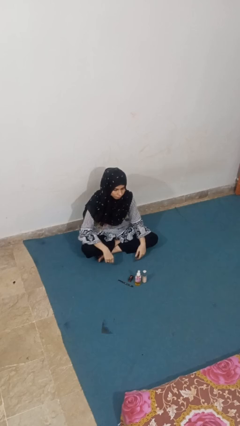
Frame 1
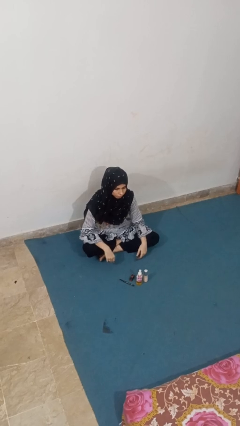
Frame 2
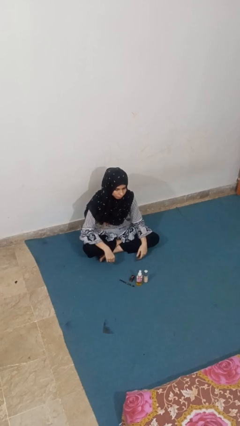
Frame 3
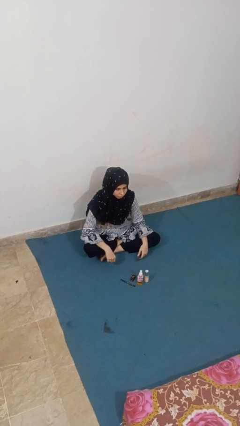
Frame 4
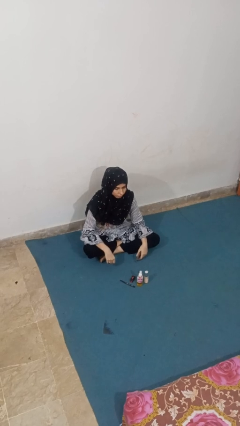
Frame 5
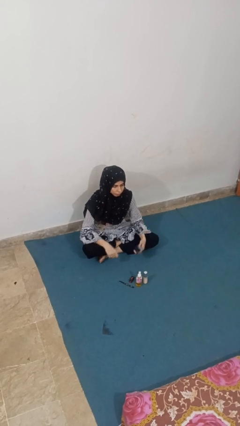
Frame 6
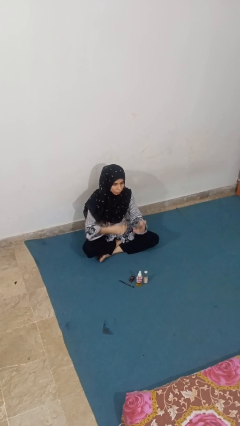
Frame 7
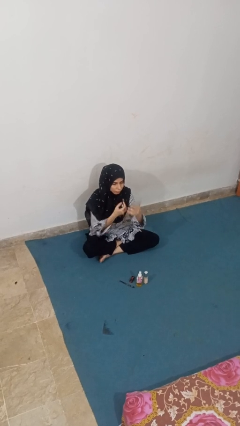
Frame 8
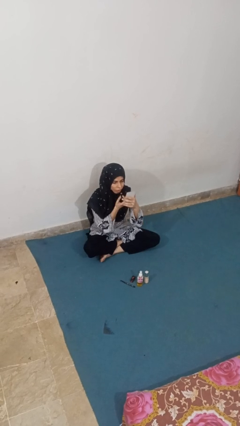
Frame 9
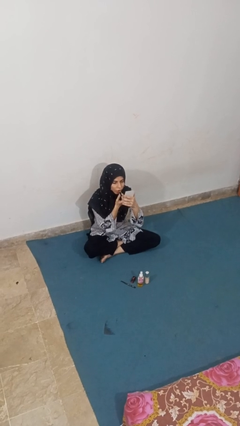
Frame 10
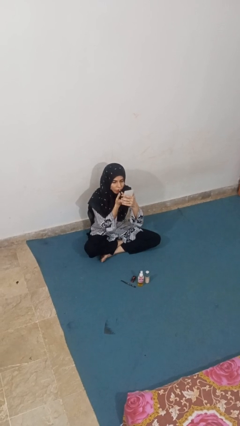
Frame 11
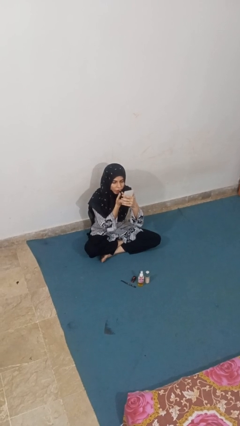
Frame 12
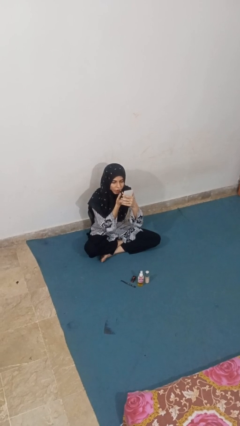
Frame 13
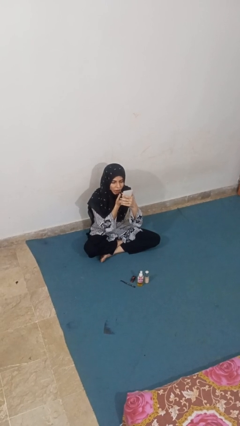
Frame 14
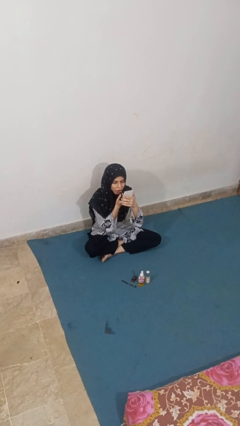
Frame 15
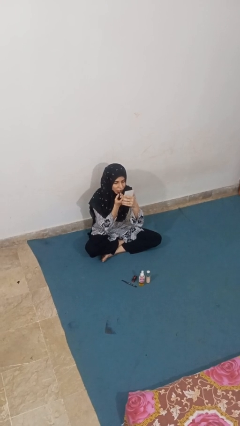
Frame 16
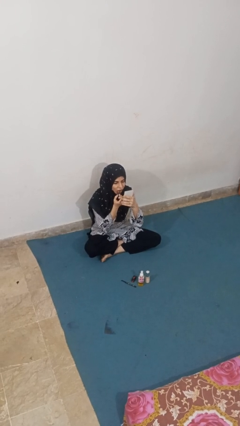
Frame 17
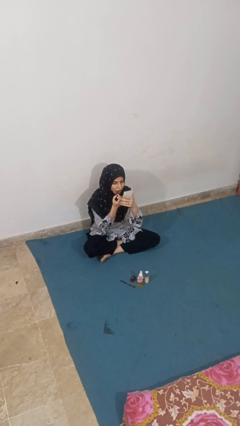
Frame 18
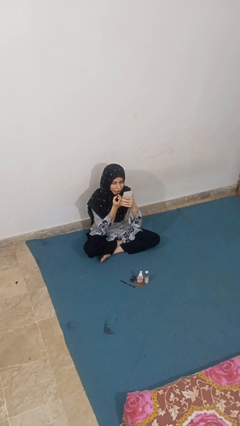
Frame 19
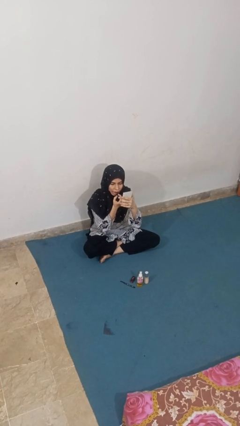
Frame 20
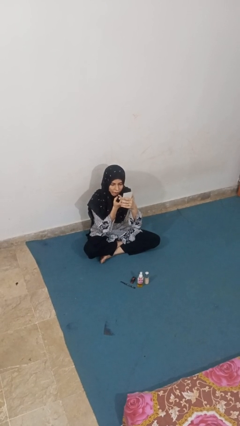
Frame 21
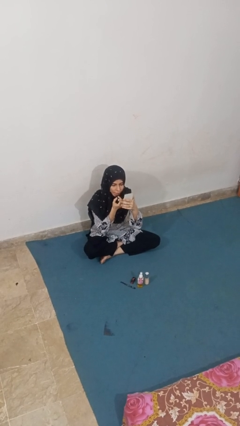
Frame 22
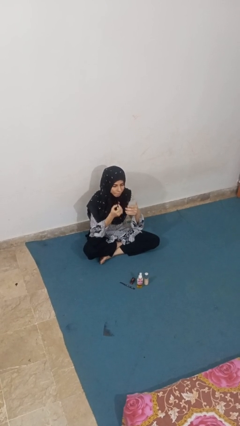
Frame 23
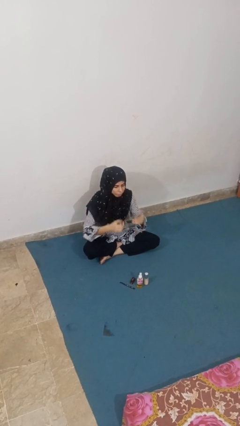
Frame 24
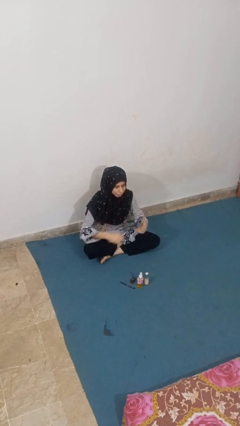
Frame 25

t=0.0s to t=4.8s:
person applies lip makeup

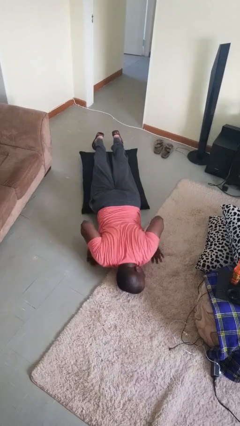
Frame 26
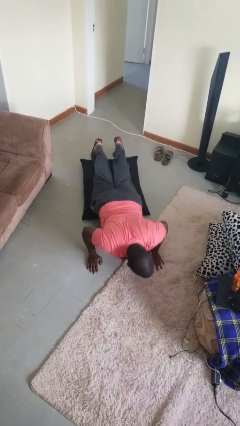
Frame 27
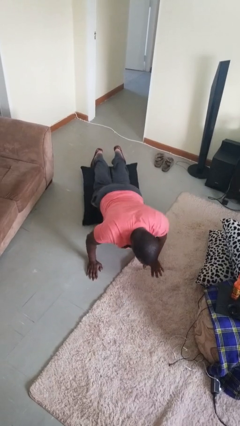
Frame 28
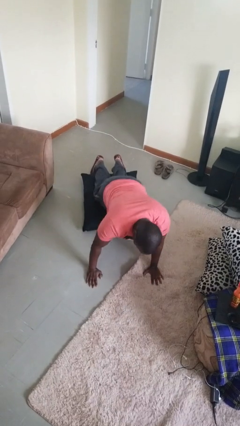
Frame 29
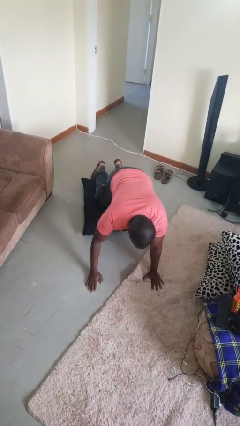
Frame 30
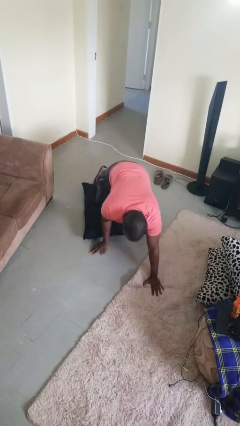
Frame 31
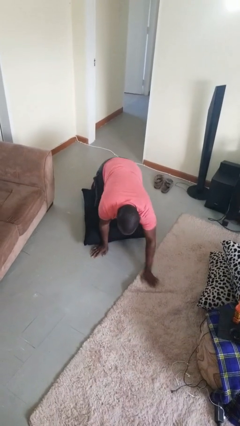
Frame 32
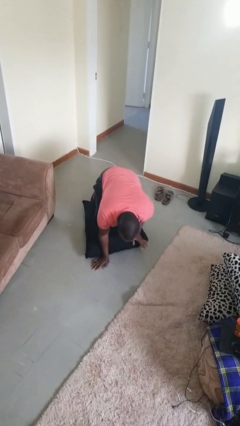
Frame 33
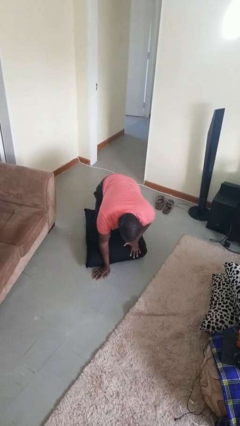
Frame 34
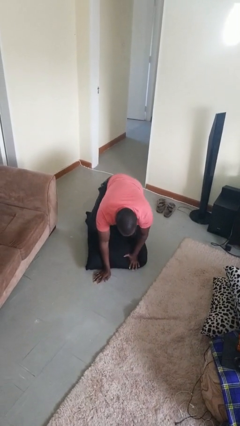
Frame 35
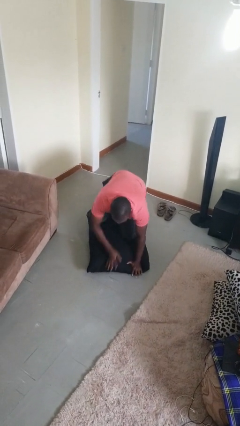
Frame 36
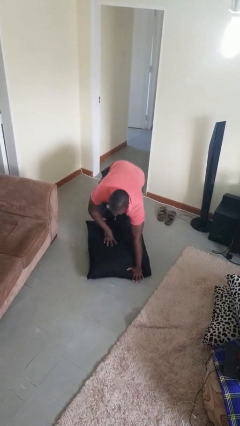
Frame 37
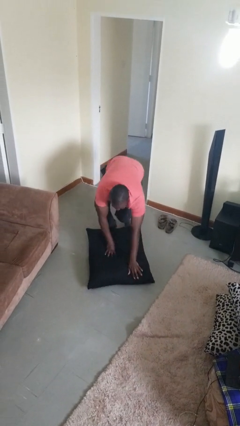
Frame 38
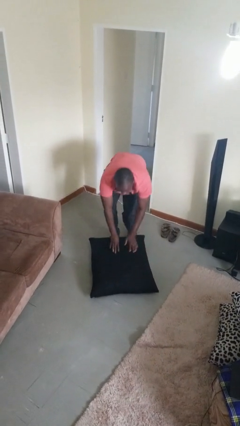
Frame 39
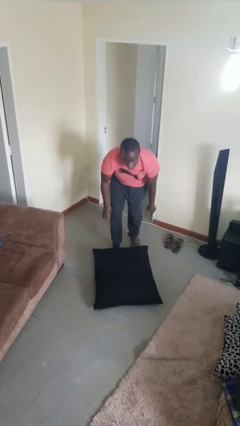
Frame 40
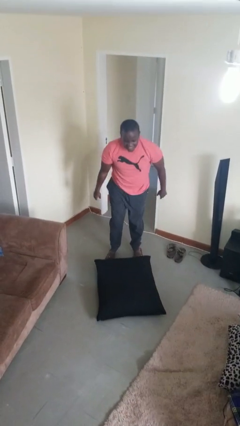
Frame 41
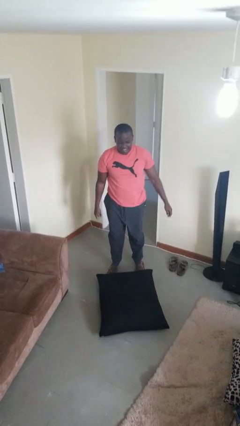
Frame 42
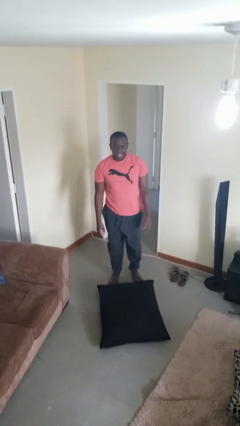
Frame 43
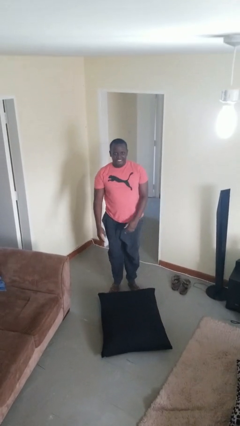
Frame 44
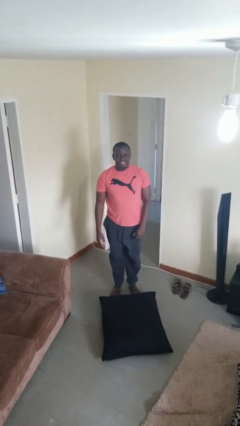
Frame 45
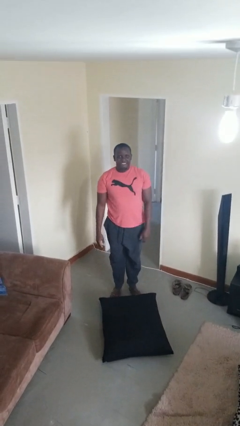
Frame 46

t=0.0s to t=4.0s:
person stands up from floor

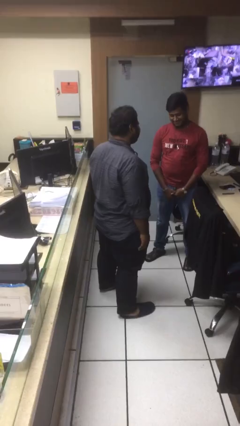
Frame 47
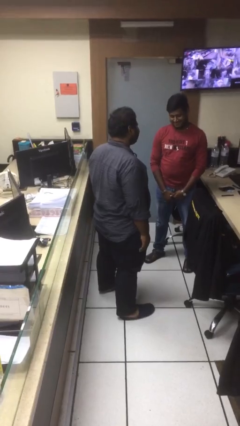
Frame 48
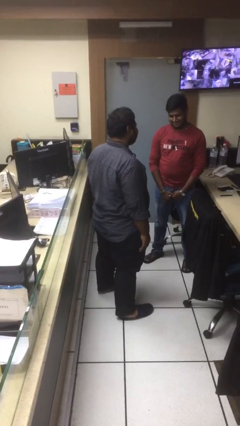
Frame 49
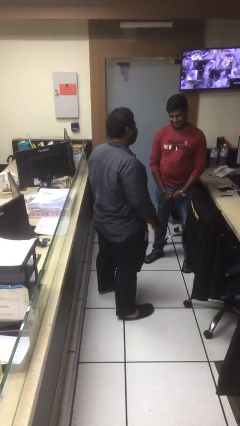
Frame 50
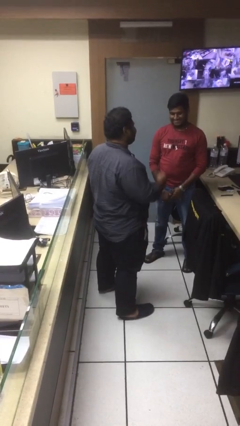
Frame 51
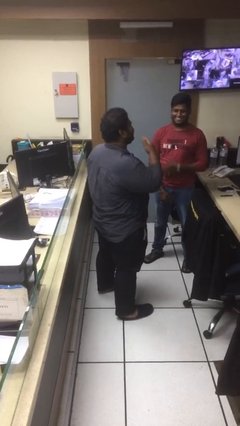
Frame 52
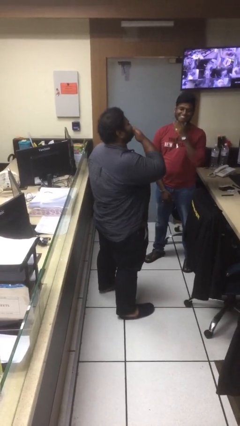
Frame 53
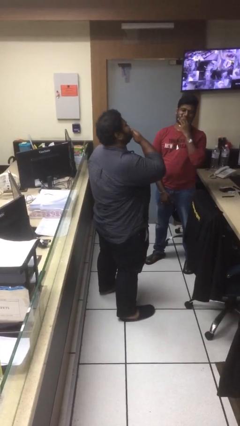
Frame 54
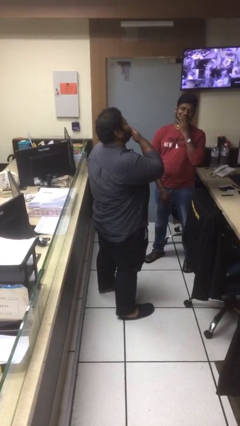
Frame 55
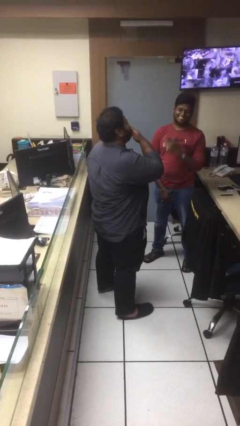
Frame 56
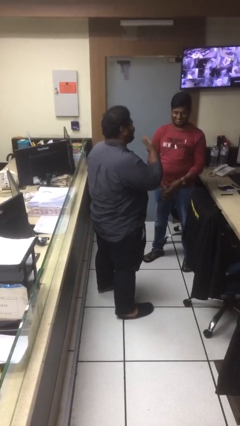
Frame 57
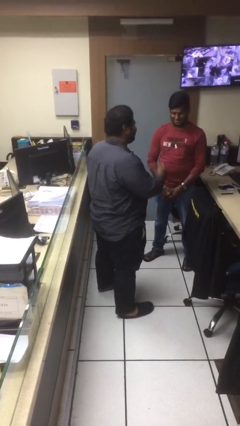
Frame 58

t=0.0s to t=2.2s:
person laughs with person

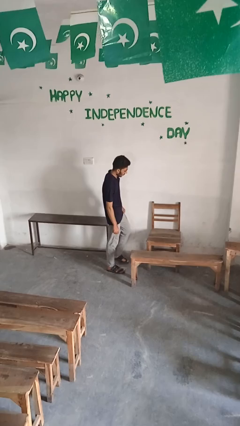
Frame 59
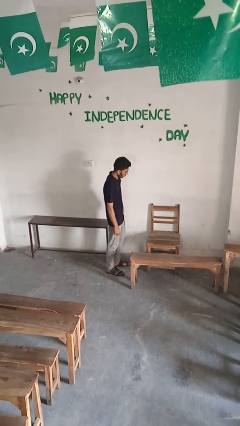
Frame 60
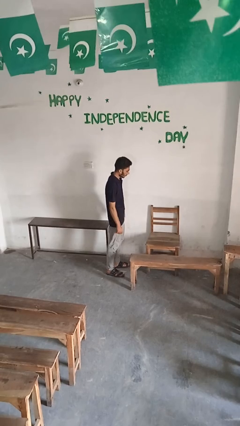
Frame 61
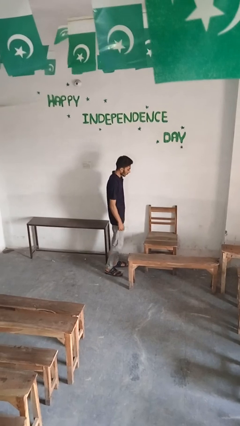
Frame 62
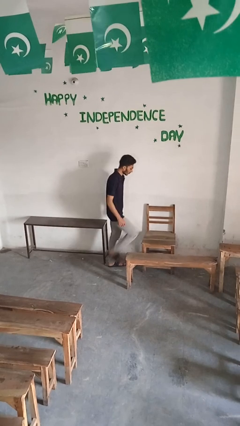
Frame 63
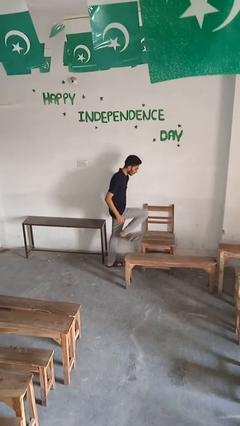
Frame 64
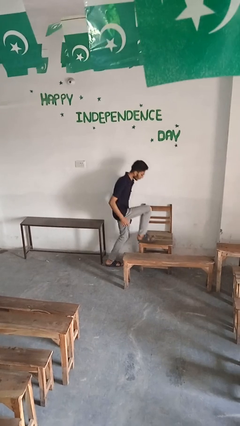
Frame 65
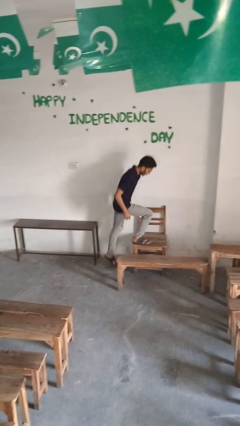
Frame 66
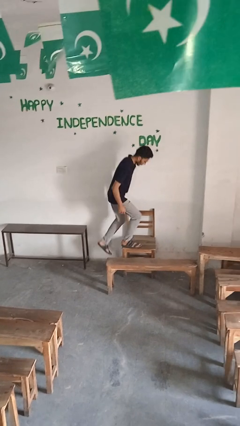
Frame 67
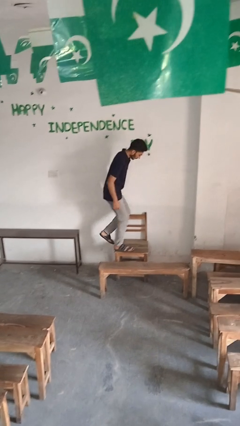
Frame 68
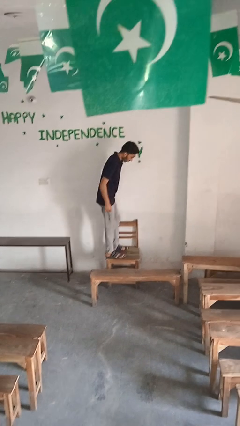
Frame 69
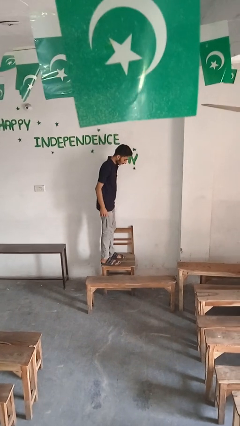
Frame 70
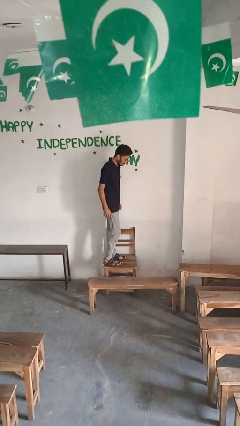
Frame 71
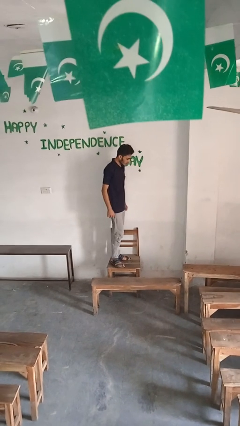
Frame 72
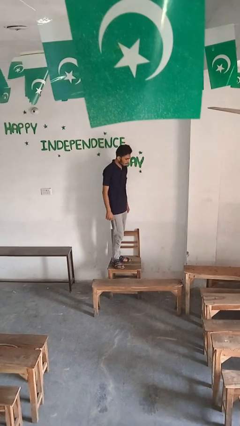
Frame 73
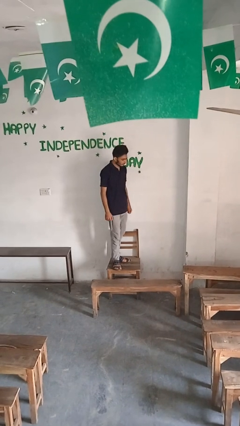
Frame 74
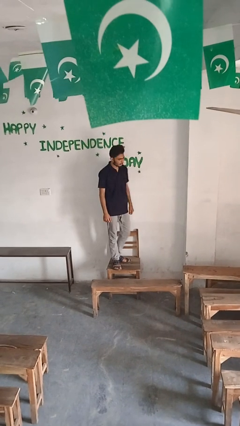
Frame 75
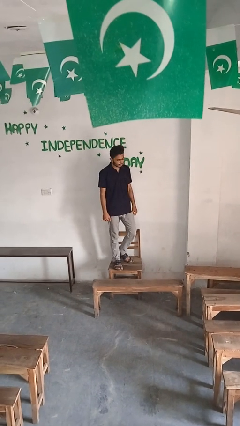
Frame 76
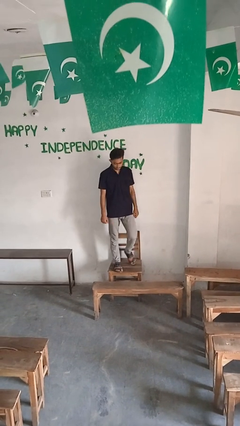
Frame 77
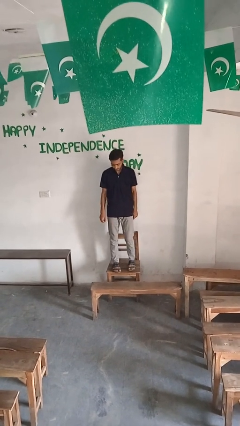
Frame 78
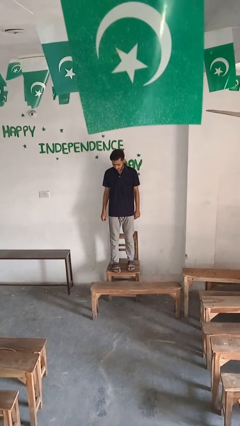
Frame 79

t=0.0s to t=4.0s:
person climbs on chair

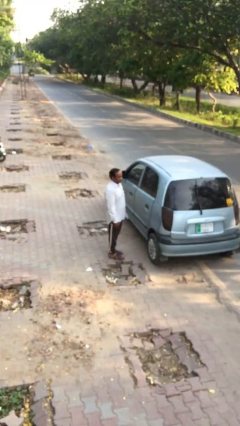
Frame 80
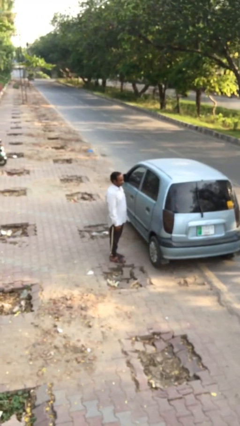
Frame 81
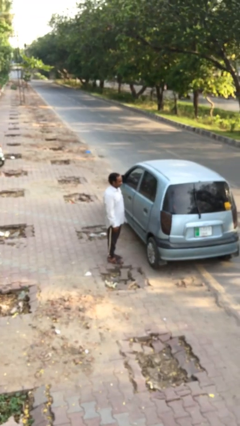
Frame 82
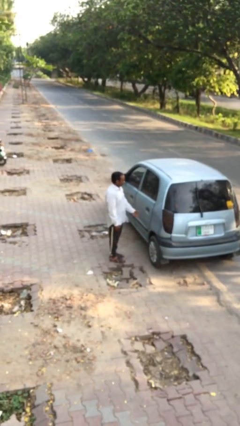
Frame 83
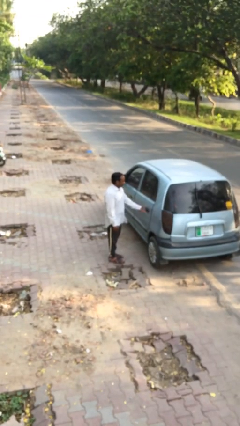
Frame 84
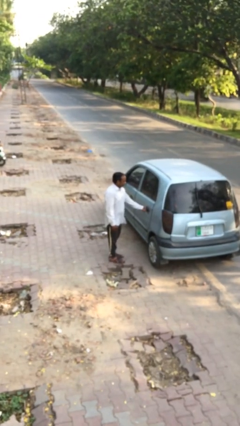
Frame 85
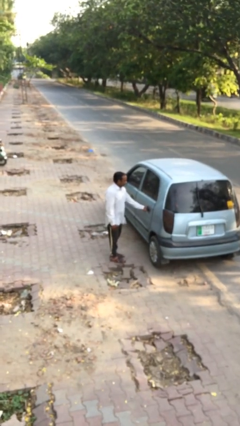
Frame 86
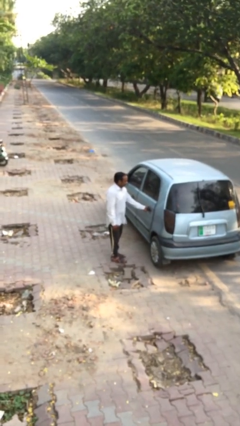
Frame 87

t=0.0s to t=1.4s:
person opens car door

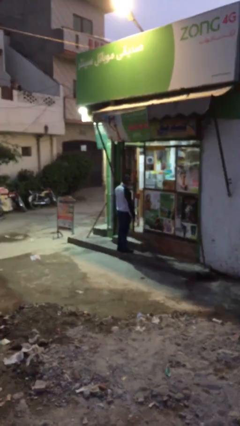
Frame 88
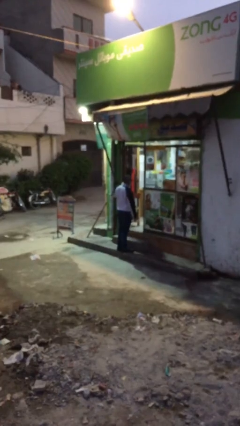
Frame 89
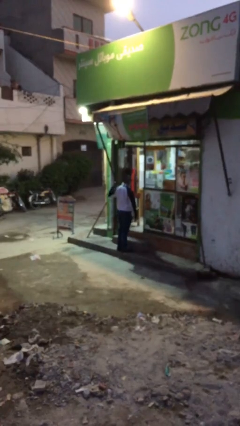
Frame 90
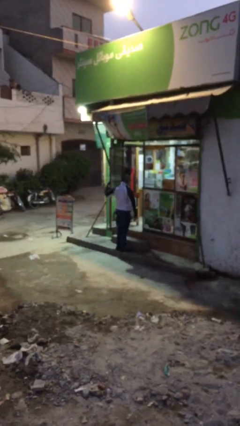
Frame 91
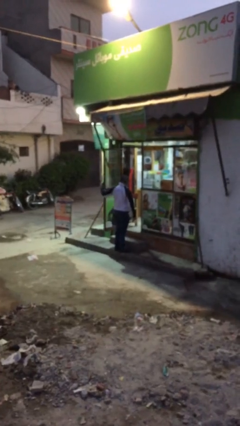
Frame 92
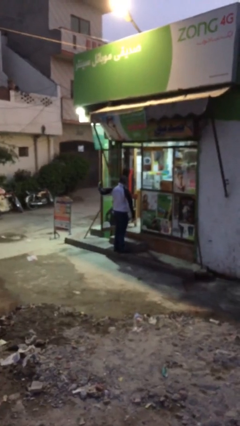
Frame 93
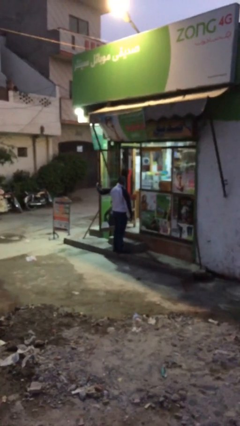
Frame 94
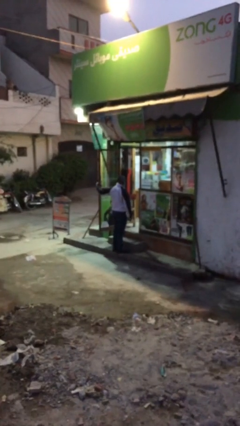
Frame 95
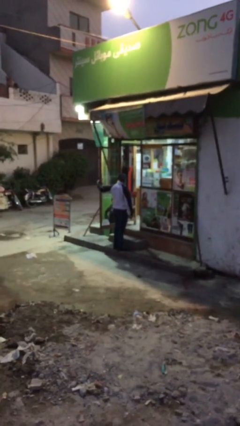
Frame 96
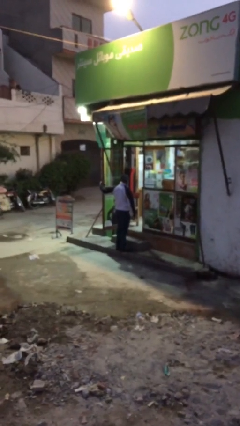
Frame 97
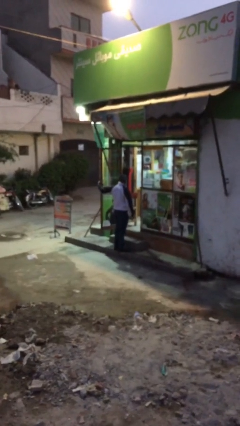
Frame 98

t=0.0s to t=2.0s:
person opens facility door
